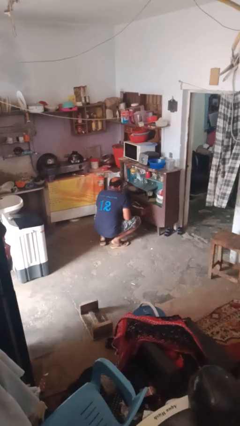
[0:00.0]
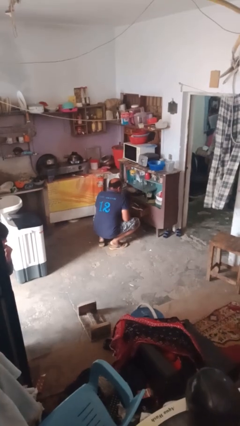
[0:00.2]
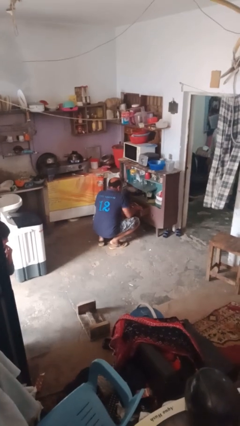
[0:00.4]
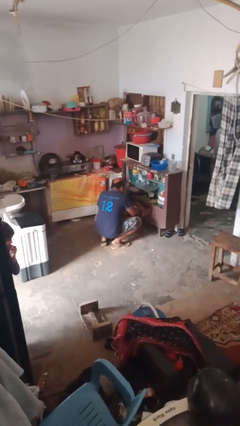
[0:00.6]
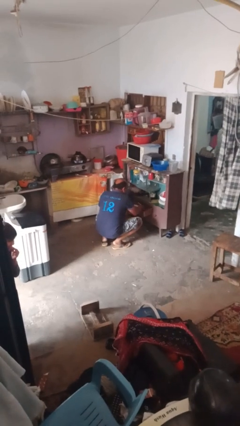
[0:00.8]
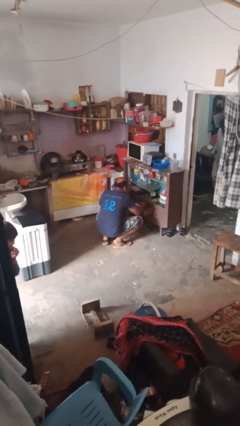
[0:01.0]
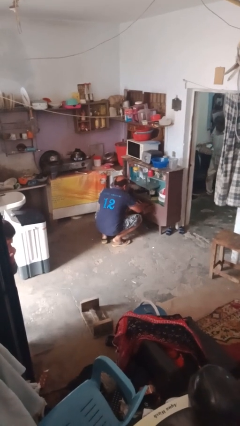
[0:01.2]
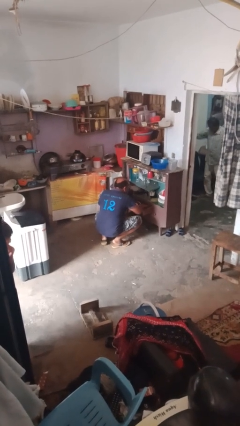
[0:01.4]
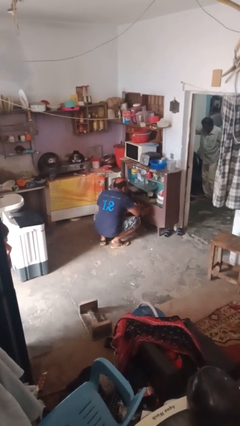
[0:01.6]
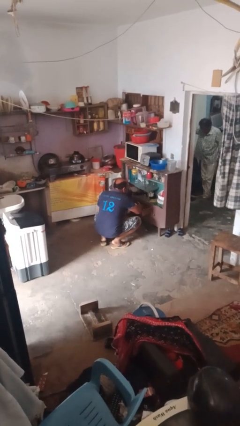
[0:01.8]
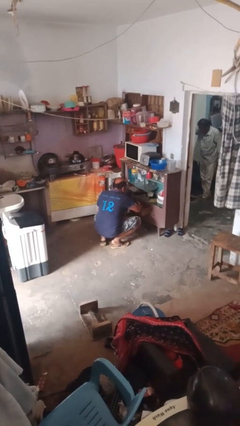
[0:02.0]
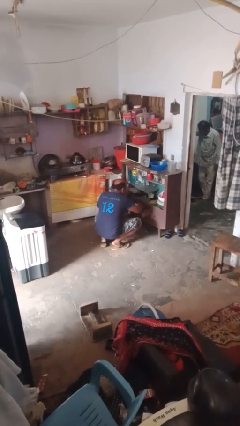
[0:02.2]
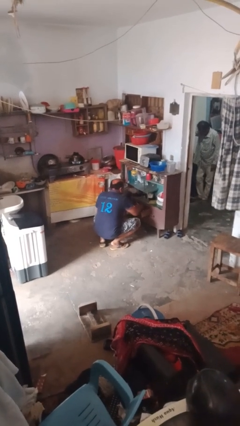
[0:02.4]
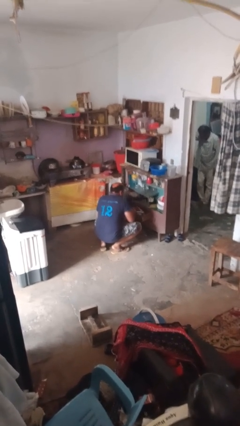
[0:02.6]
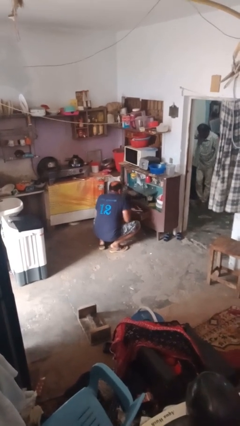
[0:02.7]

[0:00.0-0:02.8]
person searches in kitchen drawer

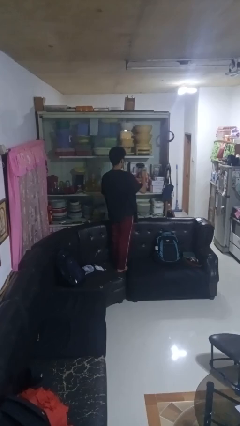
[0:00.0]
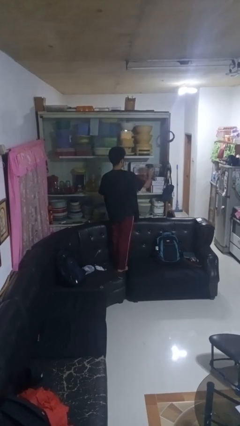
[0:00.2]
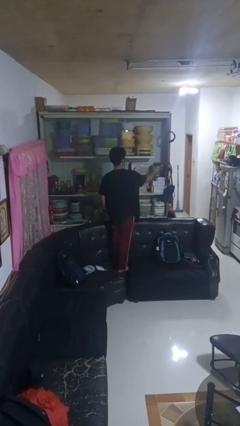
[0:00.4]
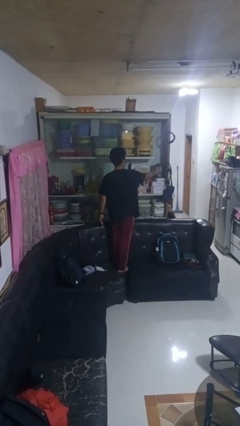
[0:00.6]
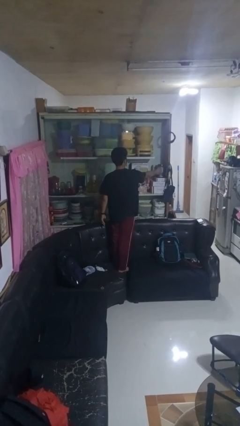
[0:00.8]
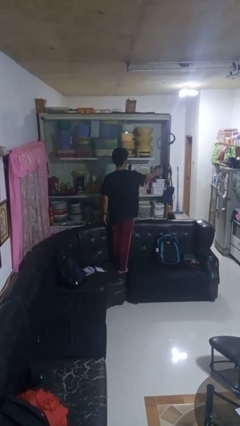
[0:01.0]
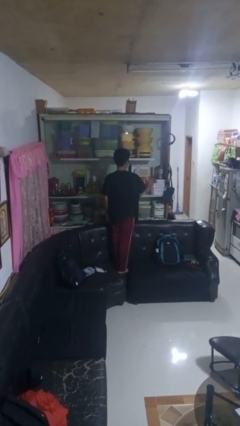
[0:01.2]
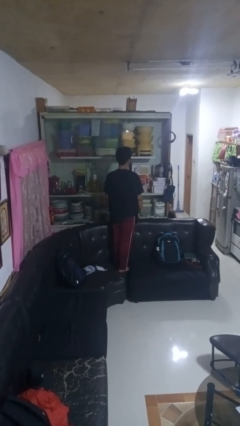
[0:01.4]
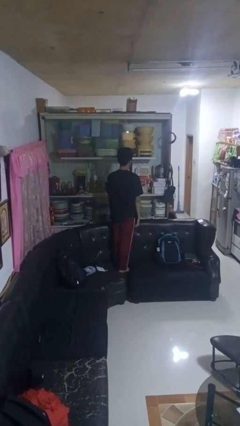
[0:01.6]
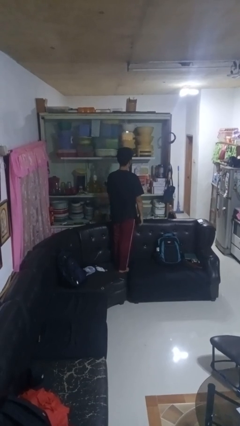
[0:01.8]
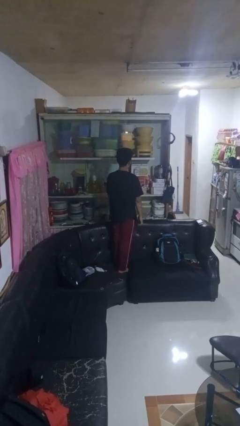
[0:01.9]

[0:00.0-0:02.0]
person puts down object into cabinet

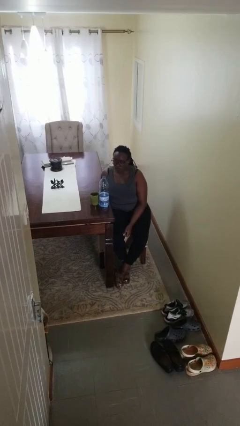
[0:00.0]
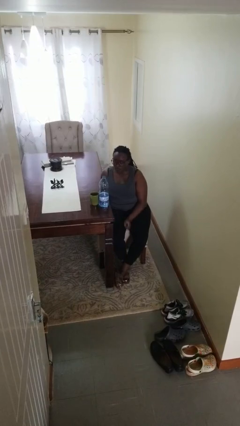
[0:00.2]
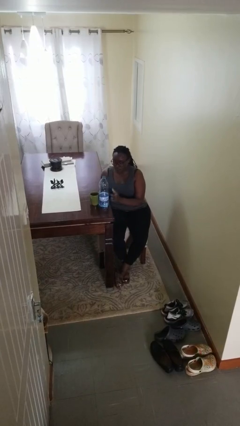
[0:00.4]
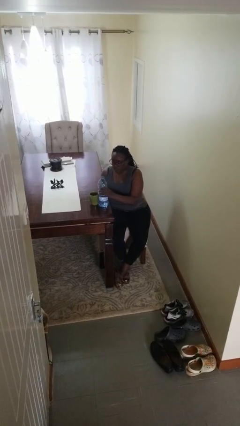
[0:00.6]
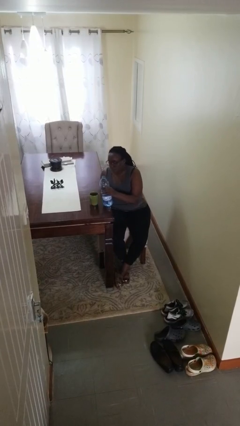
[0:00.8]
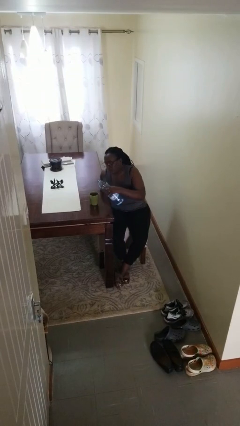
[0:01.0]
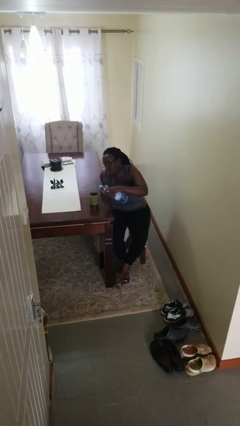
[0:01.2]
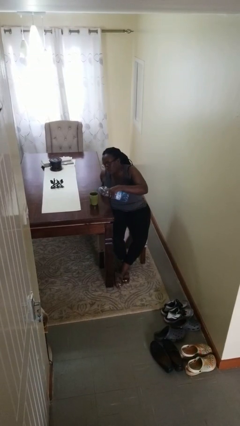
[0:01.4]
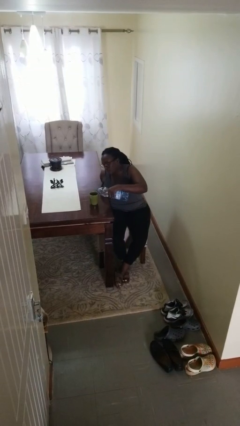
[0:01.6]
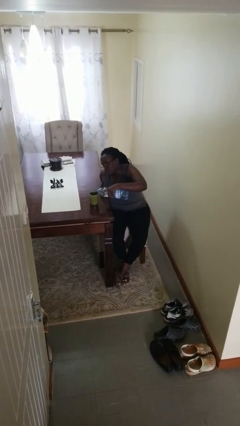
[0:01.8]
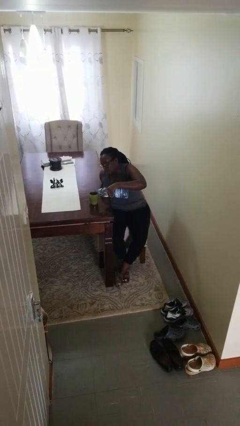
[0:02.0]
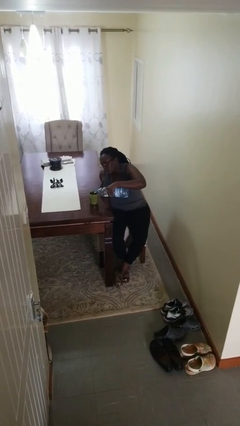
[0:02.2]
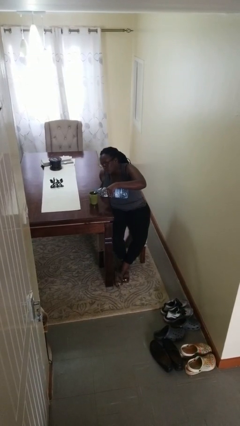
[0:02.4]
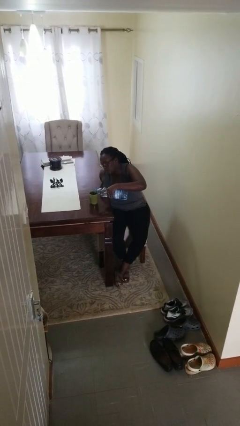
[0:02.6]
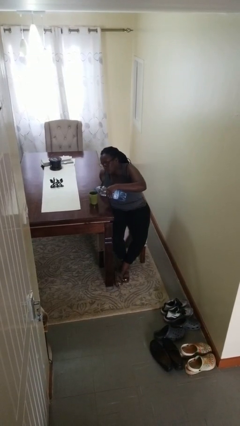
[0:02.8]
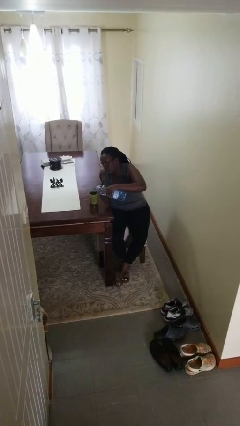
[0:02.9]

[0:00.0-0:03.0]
person pours liquid into cup

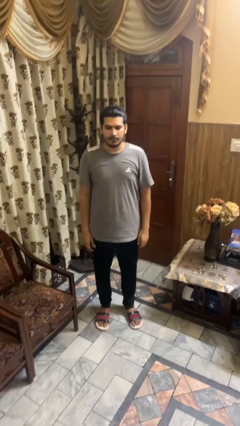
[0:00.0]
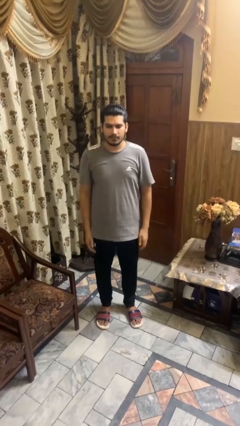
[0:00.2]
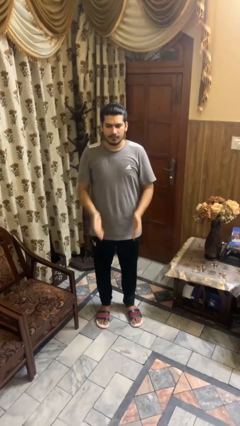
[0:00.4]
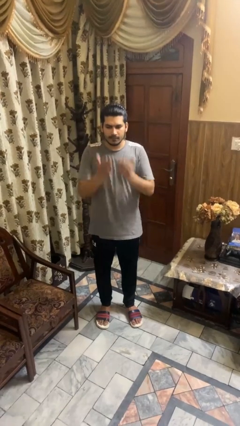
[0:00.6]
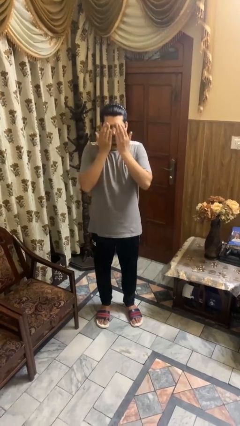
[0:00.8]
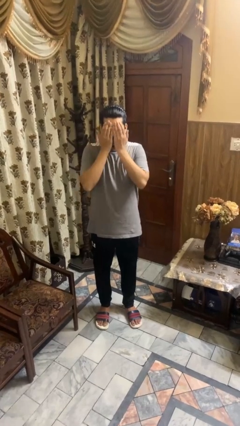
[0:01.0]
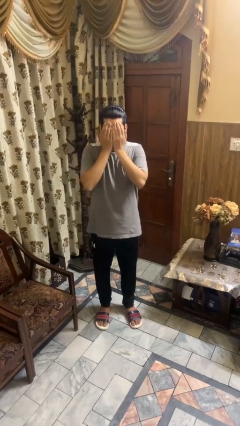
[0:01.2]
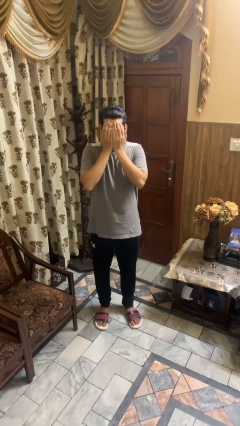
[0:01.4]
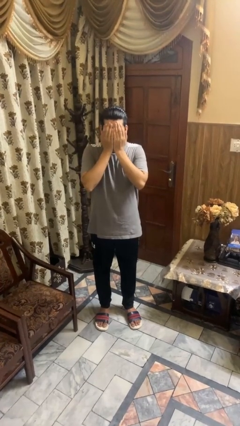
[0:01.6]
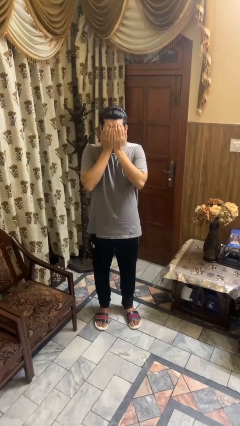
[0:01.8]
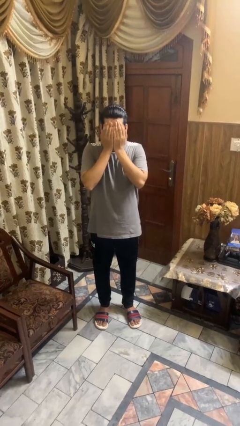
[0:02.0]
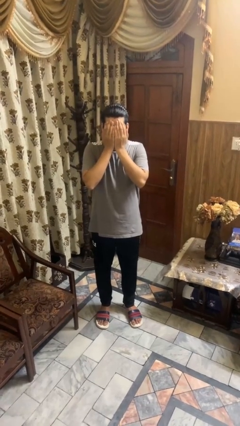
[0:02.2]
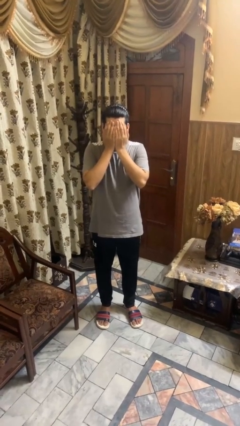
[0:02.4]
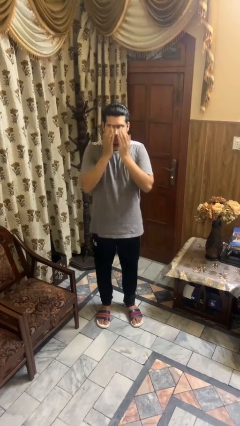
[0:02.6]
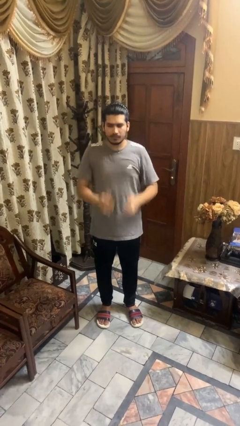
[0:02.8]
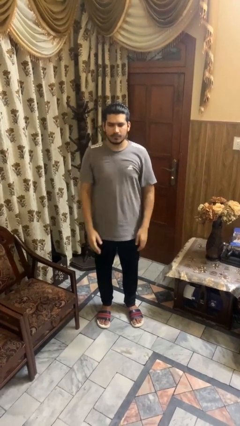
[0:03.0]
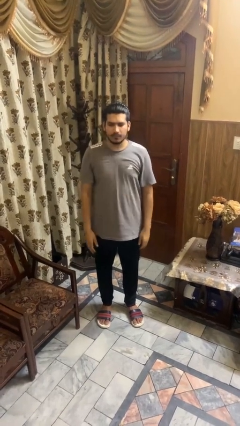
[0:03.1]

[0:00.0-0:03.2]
person covers face with hands

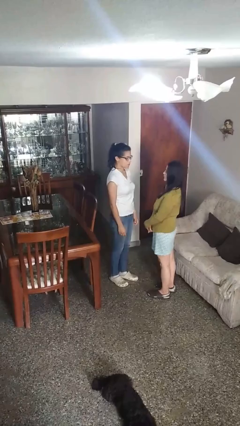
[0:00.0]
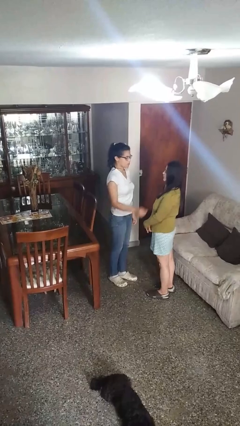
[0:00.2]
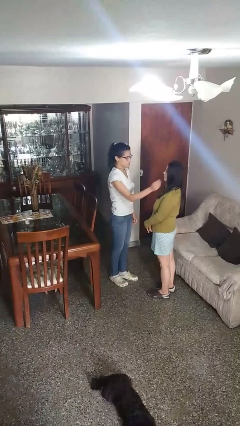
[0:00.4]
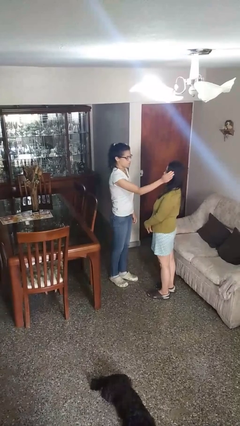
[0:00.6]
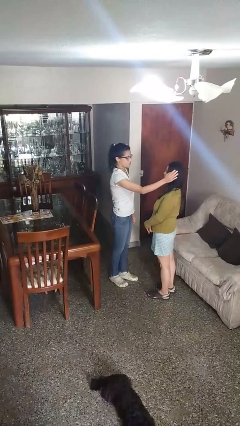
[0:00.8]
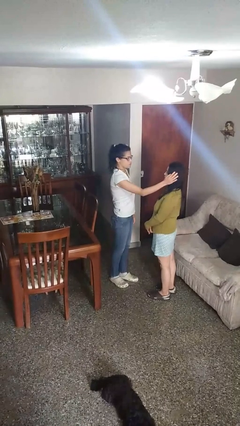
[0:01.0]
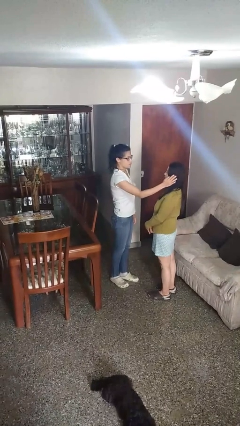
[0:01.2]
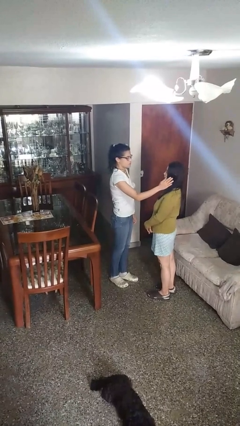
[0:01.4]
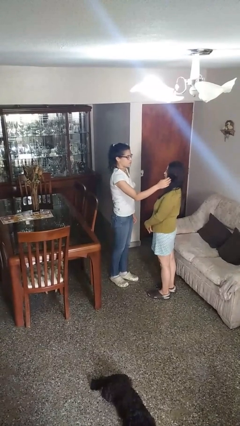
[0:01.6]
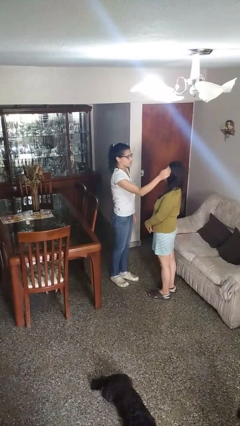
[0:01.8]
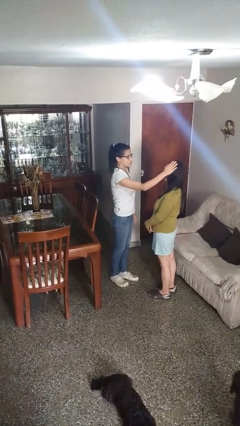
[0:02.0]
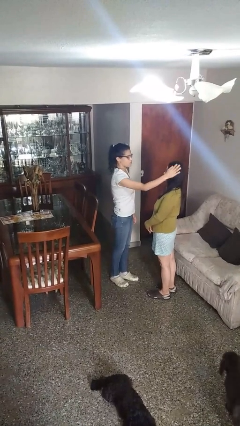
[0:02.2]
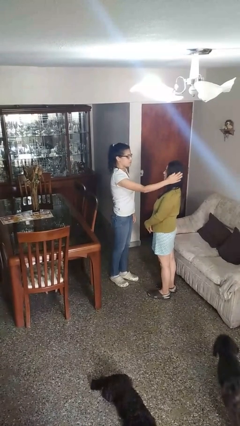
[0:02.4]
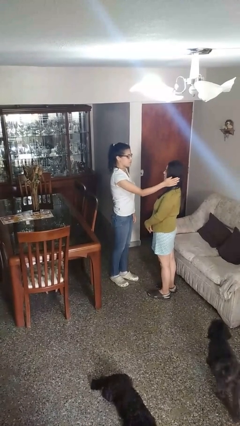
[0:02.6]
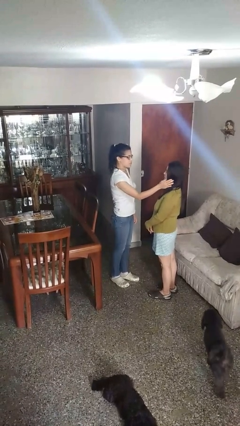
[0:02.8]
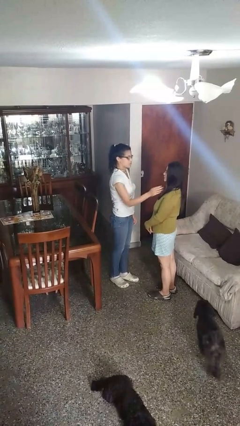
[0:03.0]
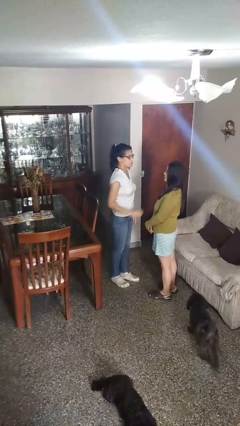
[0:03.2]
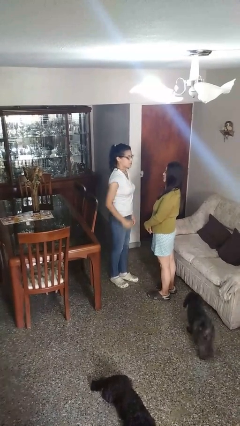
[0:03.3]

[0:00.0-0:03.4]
person touches face of person

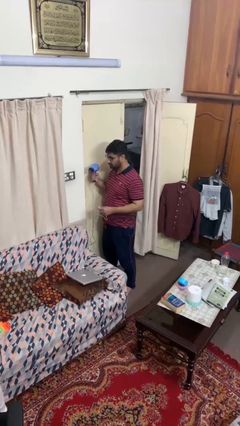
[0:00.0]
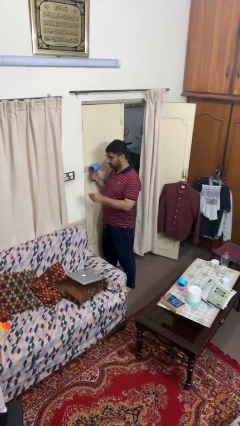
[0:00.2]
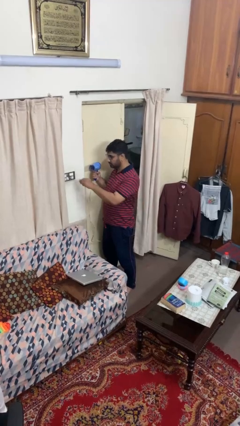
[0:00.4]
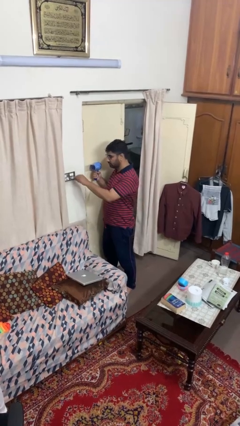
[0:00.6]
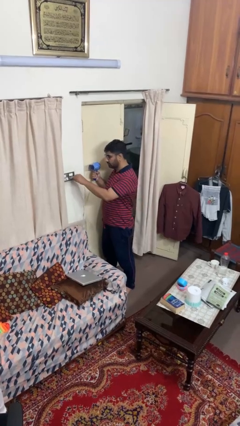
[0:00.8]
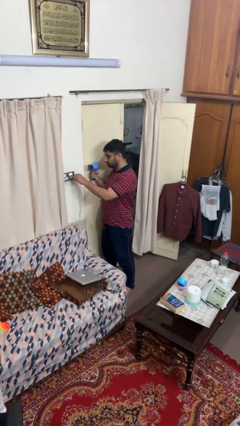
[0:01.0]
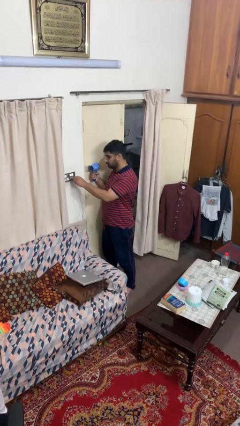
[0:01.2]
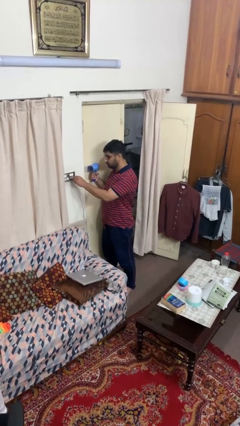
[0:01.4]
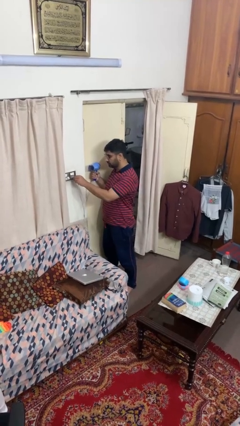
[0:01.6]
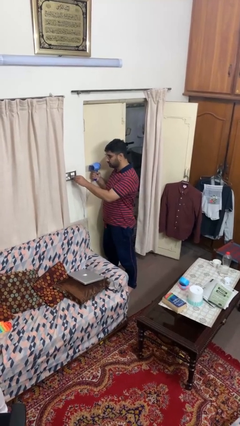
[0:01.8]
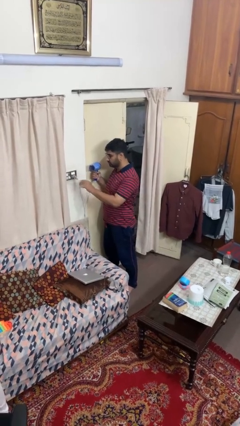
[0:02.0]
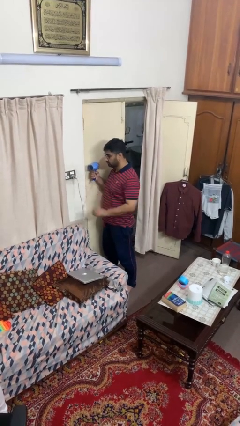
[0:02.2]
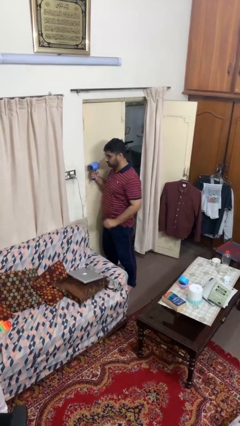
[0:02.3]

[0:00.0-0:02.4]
person plugs into electrical socket

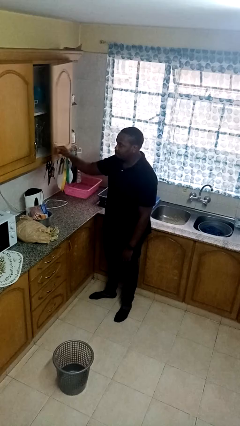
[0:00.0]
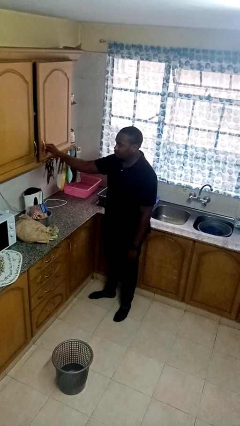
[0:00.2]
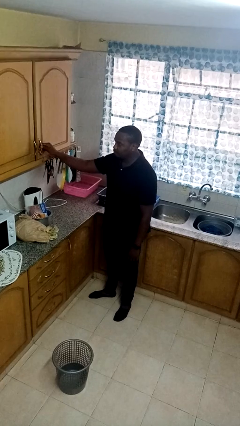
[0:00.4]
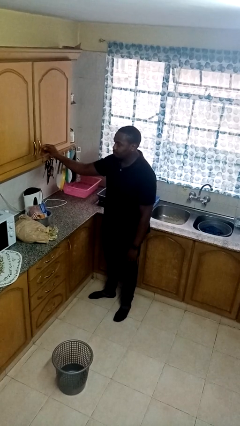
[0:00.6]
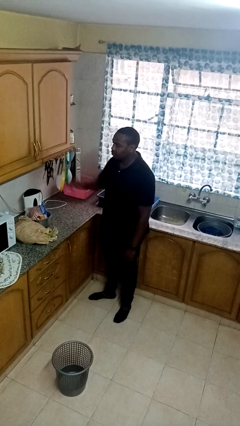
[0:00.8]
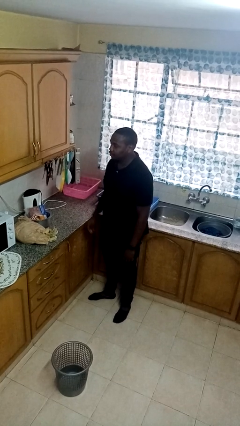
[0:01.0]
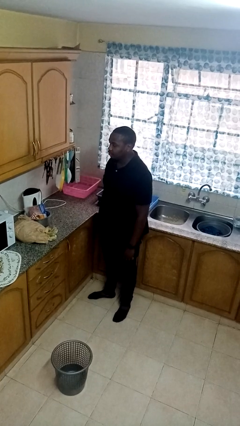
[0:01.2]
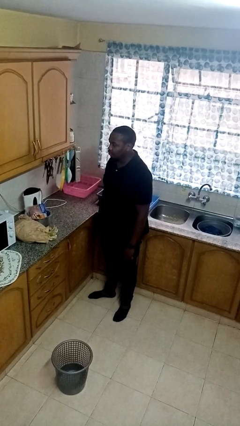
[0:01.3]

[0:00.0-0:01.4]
person closes cabinet
